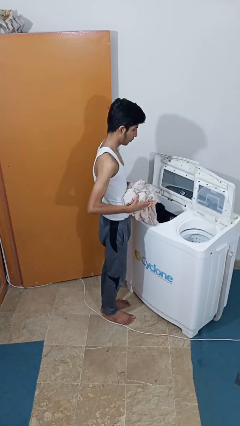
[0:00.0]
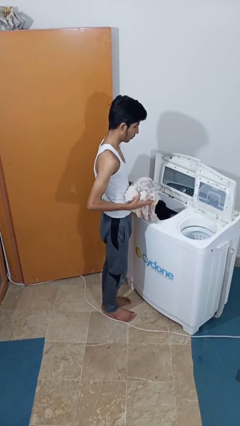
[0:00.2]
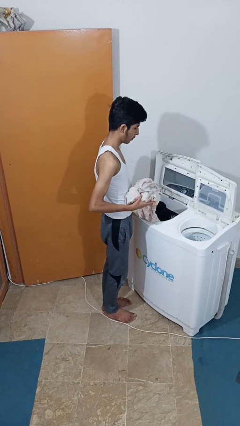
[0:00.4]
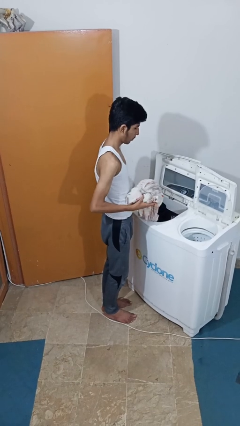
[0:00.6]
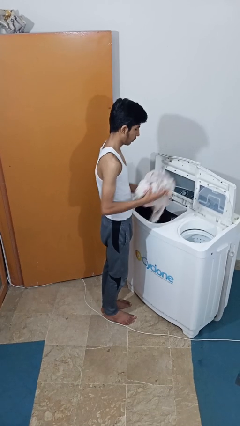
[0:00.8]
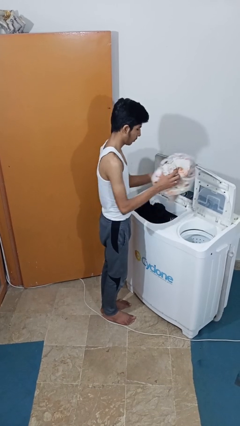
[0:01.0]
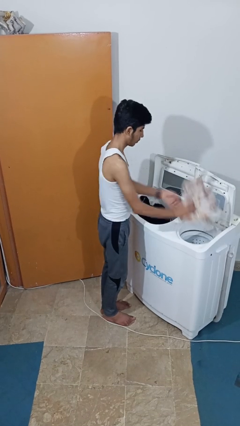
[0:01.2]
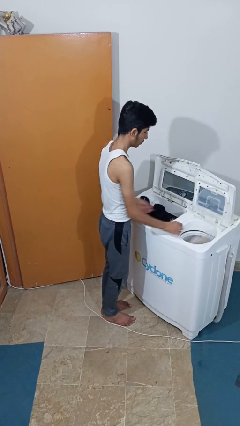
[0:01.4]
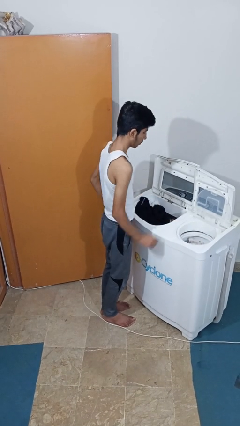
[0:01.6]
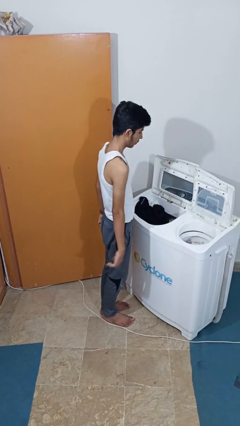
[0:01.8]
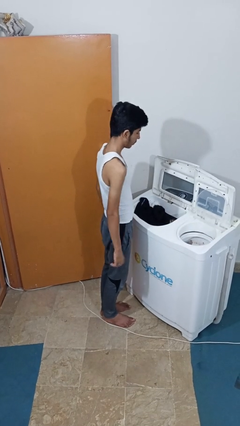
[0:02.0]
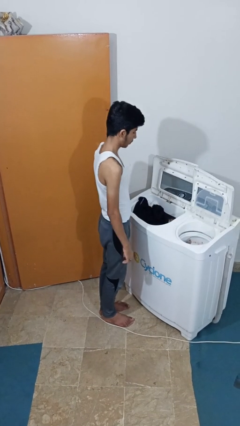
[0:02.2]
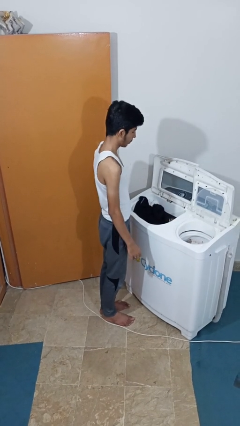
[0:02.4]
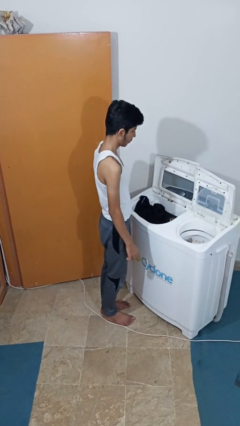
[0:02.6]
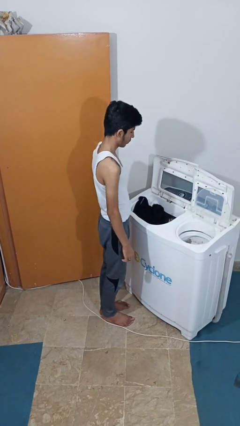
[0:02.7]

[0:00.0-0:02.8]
person loads dryer

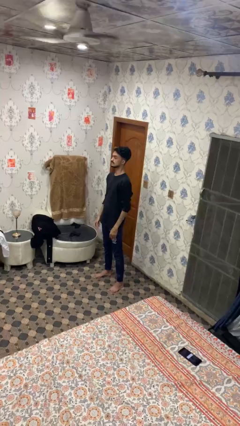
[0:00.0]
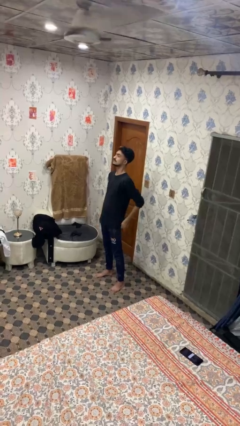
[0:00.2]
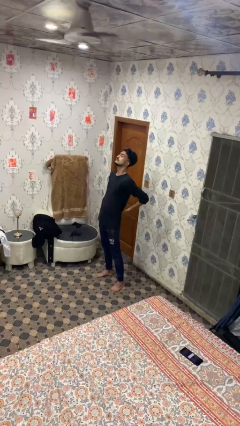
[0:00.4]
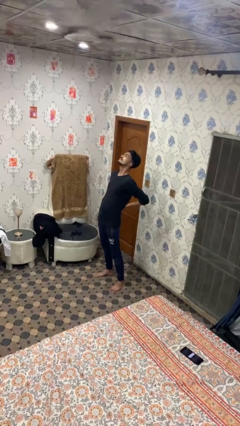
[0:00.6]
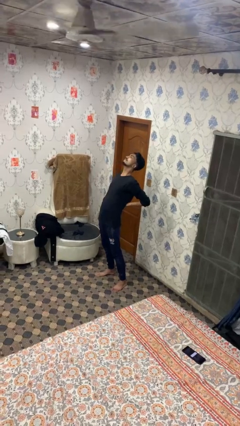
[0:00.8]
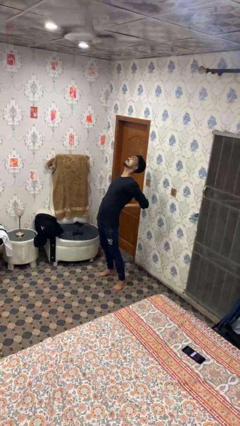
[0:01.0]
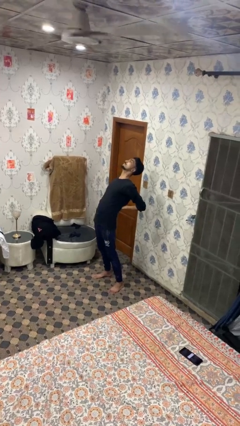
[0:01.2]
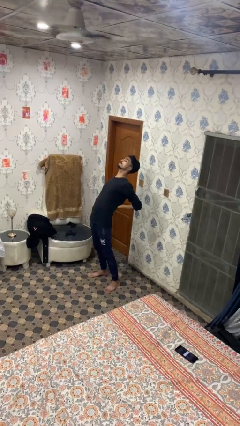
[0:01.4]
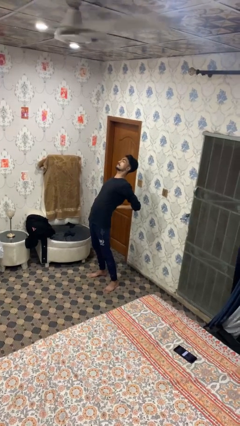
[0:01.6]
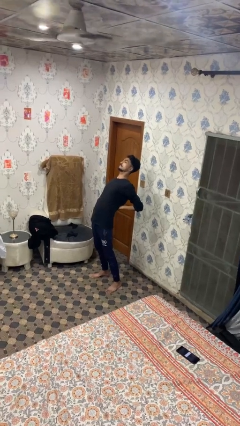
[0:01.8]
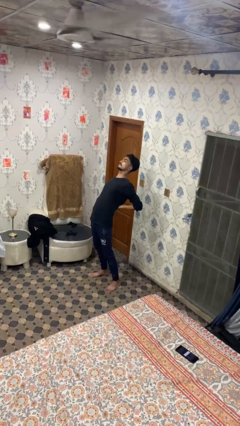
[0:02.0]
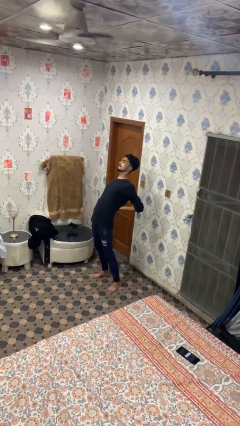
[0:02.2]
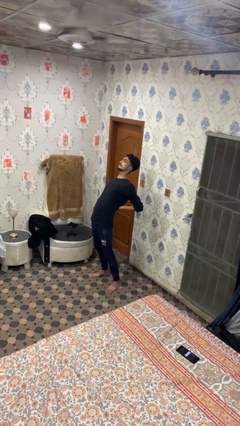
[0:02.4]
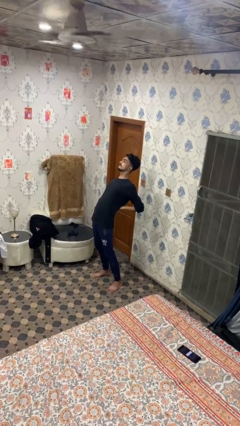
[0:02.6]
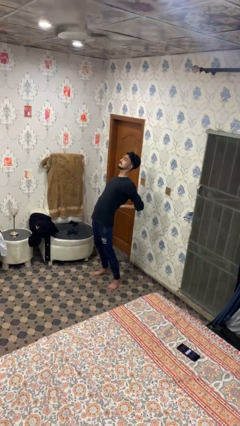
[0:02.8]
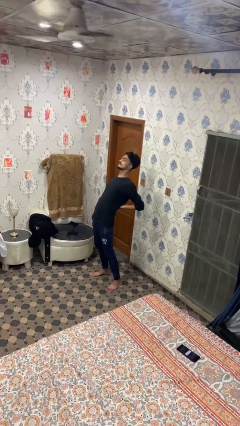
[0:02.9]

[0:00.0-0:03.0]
person stretches back

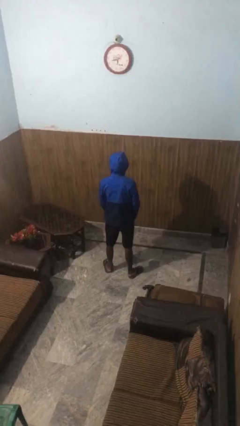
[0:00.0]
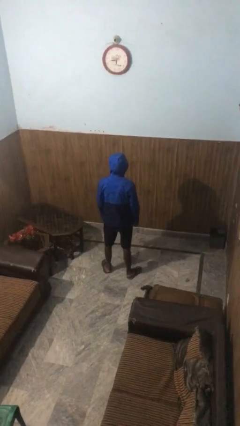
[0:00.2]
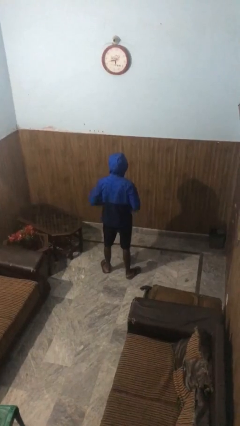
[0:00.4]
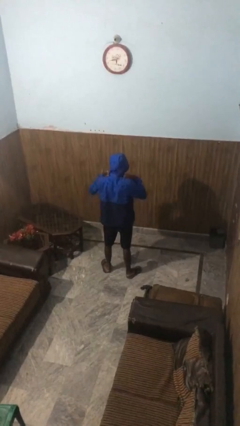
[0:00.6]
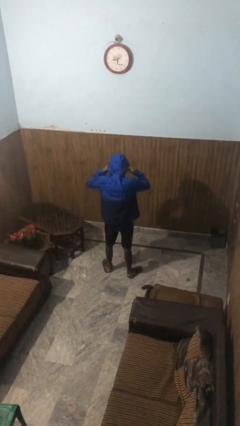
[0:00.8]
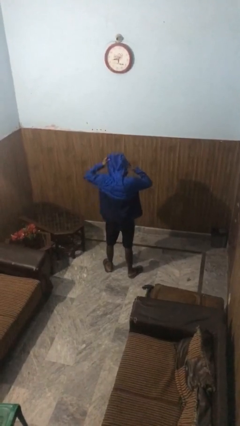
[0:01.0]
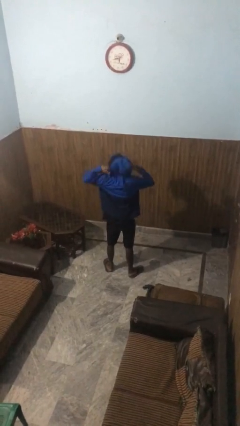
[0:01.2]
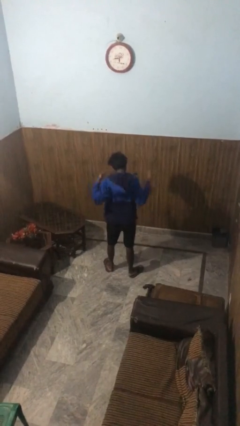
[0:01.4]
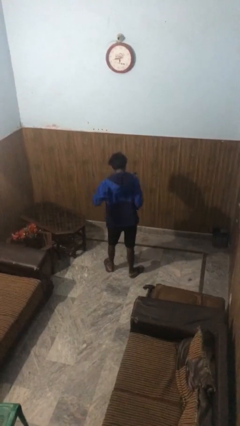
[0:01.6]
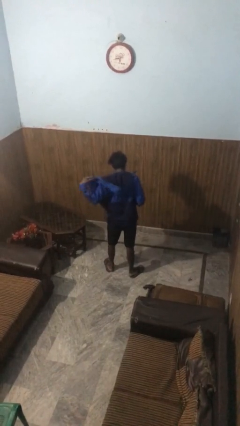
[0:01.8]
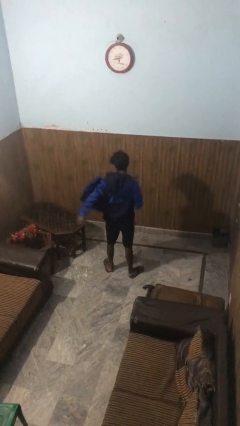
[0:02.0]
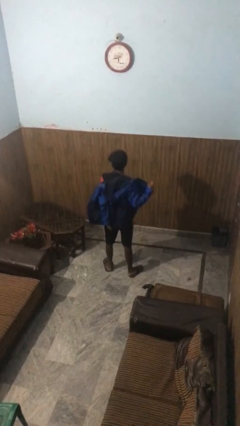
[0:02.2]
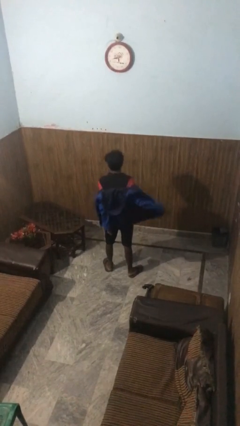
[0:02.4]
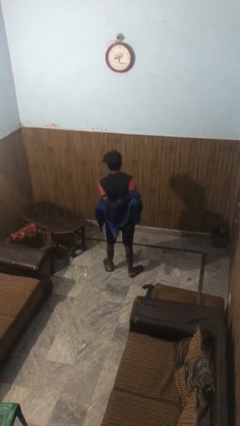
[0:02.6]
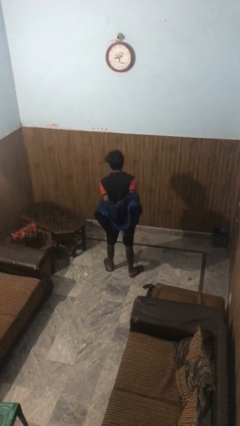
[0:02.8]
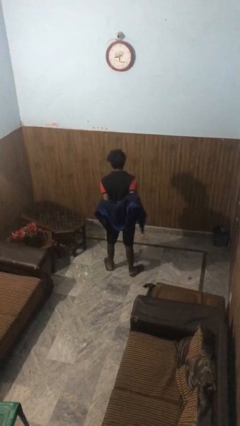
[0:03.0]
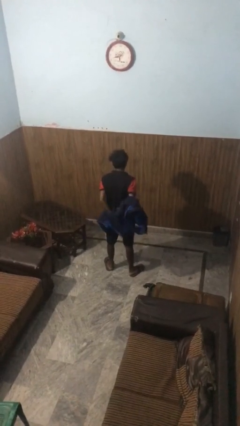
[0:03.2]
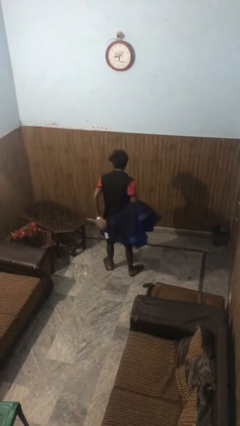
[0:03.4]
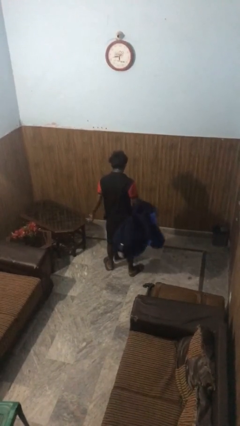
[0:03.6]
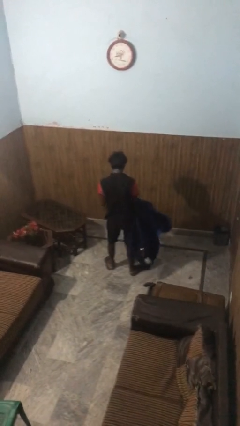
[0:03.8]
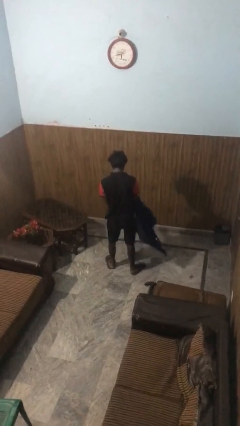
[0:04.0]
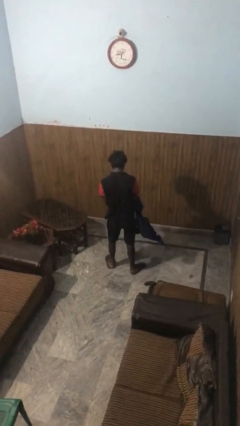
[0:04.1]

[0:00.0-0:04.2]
person takes off hoodie

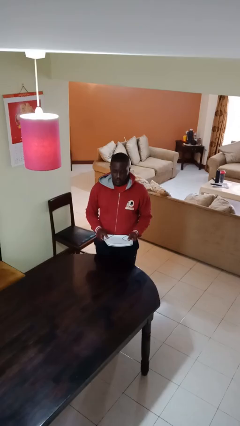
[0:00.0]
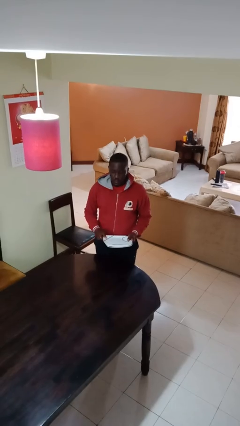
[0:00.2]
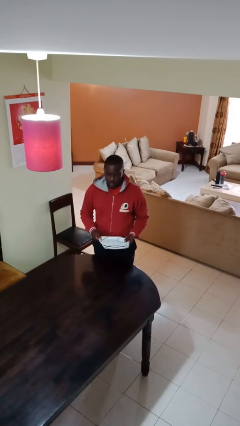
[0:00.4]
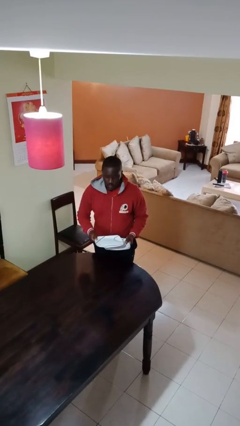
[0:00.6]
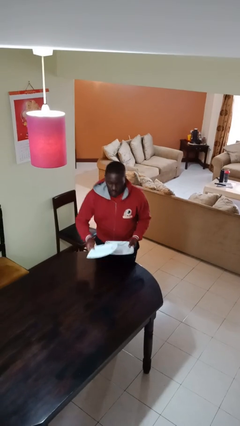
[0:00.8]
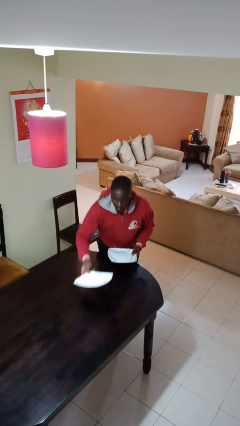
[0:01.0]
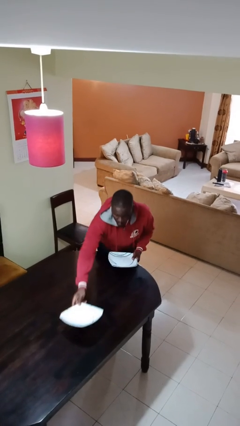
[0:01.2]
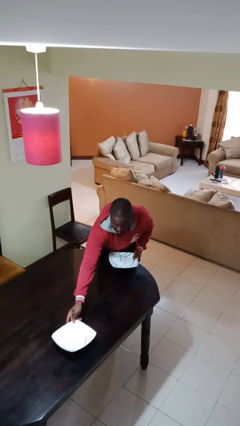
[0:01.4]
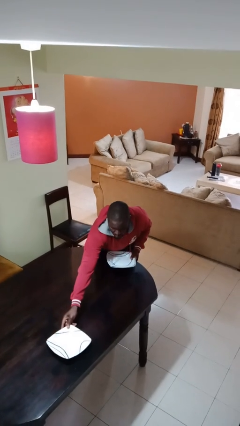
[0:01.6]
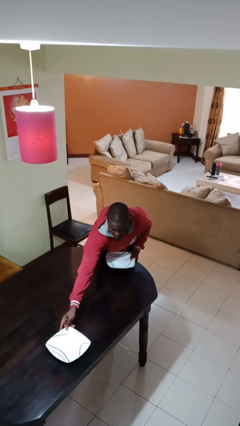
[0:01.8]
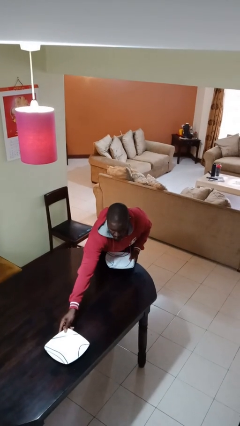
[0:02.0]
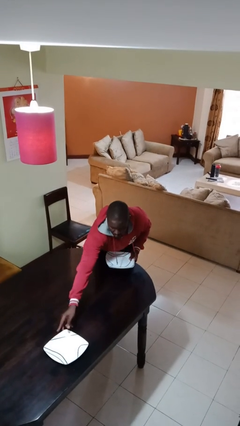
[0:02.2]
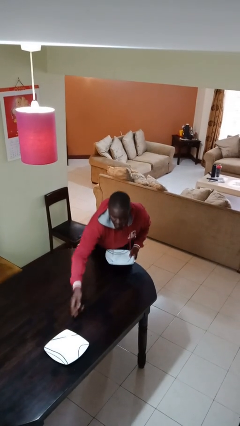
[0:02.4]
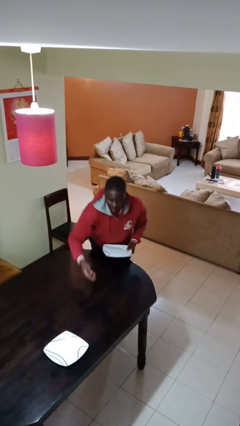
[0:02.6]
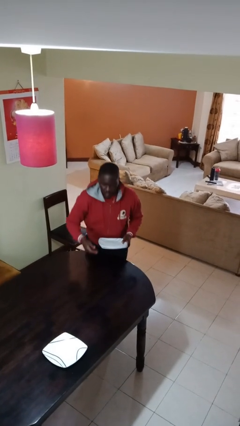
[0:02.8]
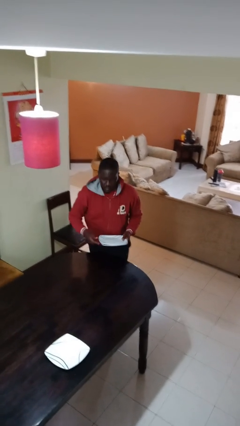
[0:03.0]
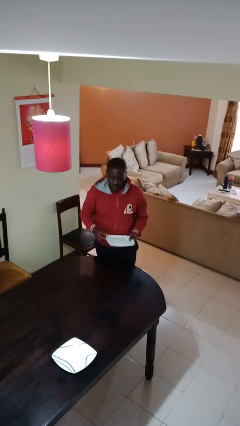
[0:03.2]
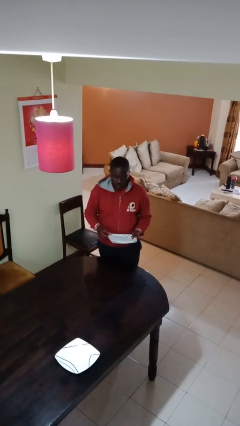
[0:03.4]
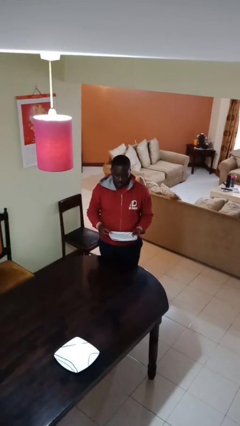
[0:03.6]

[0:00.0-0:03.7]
person sets table

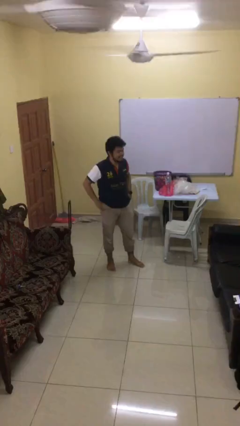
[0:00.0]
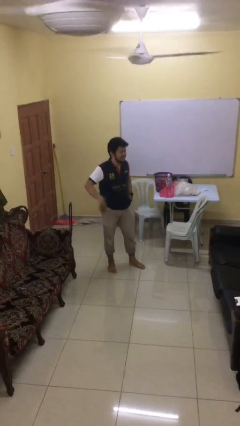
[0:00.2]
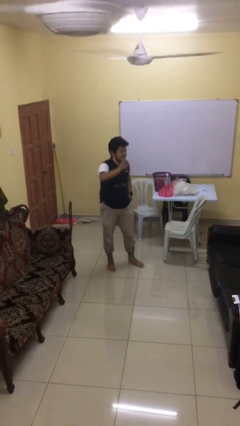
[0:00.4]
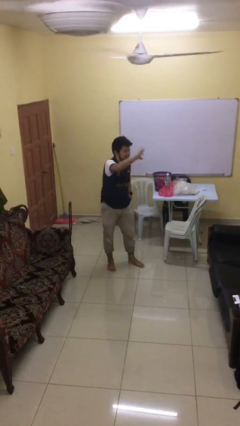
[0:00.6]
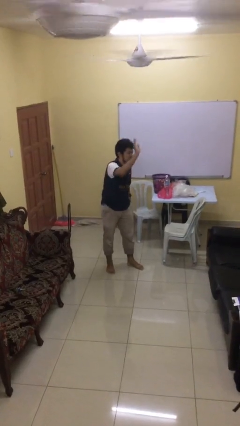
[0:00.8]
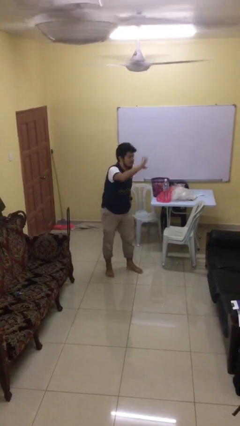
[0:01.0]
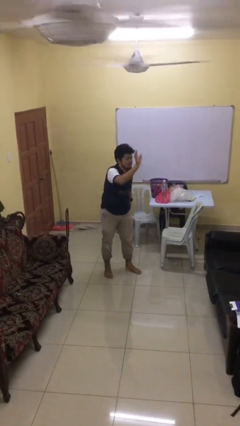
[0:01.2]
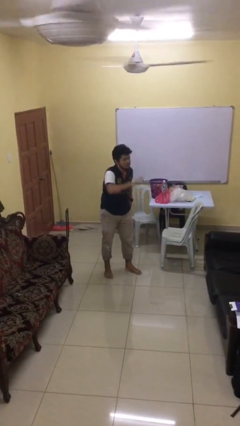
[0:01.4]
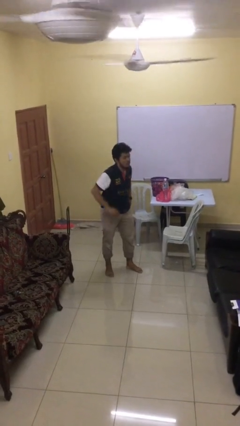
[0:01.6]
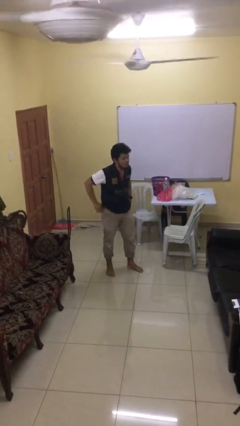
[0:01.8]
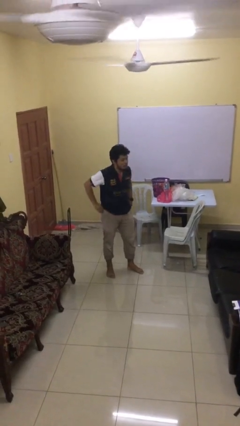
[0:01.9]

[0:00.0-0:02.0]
person waves at person

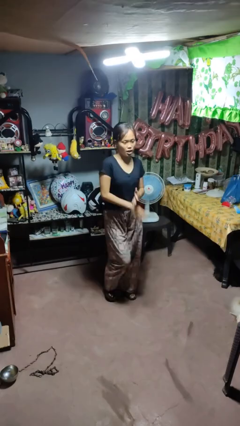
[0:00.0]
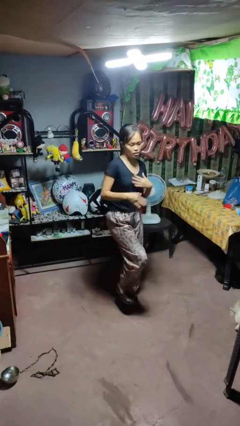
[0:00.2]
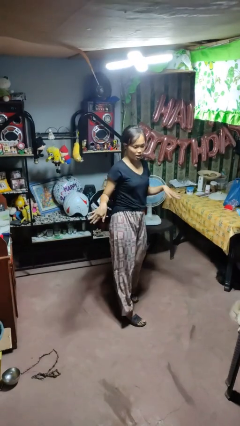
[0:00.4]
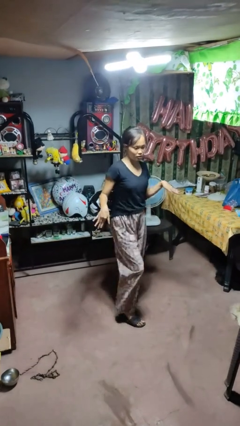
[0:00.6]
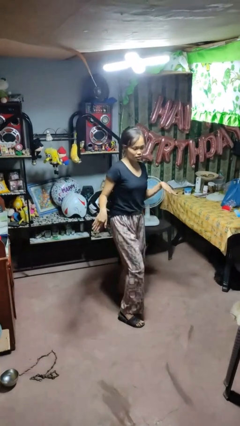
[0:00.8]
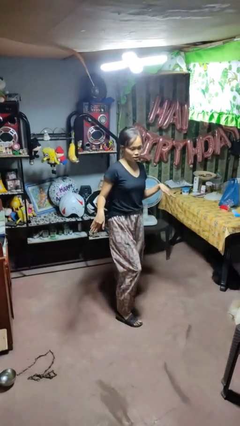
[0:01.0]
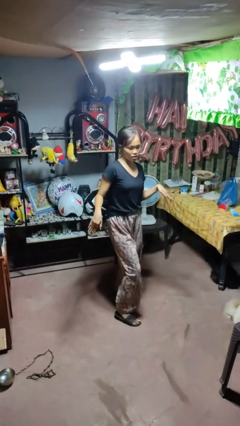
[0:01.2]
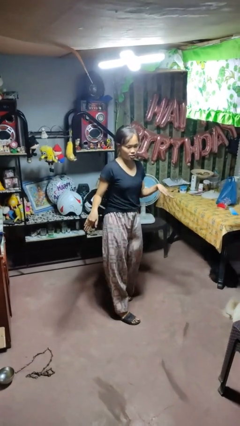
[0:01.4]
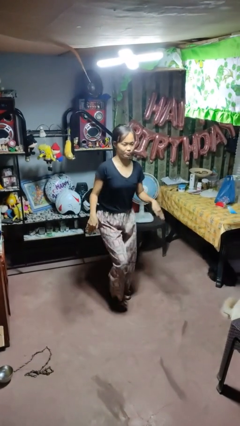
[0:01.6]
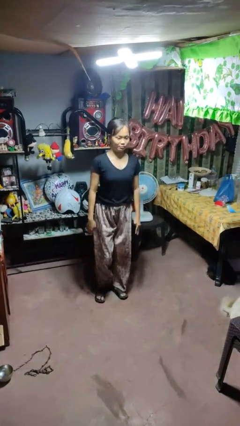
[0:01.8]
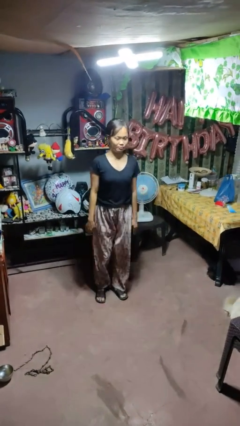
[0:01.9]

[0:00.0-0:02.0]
person dances in place
